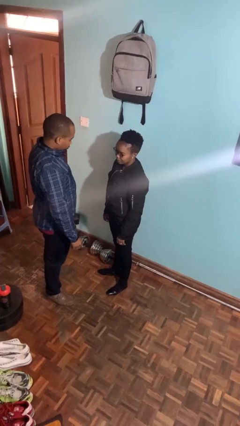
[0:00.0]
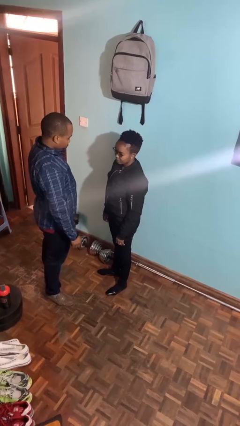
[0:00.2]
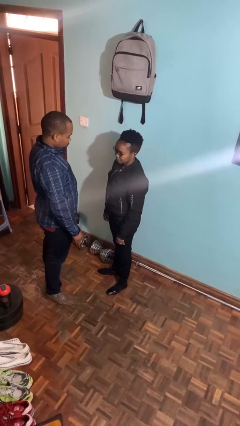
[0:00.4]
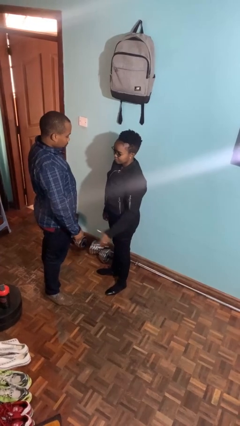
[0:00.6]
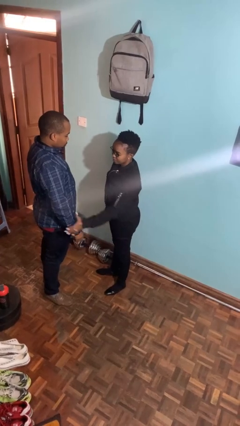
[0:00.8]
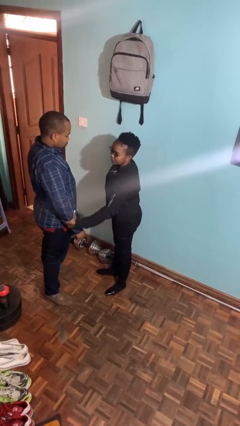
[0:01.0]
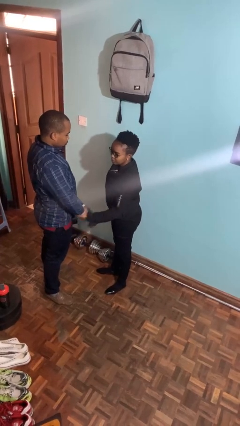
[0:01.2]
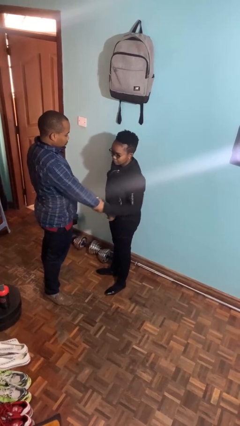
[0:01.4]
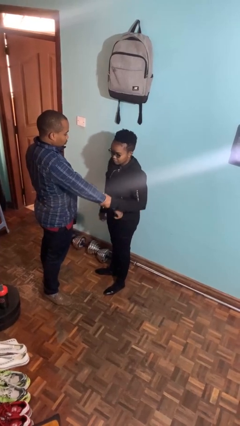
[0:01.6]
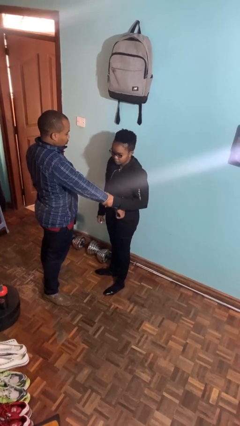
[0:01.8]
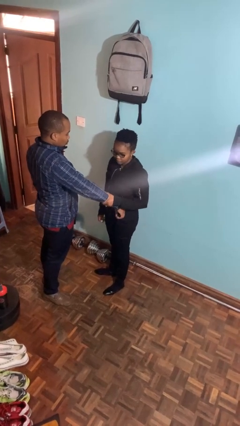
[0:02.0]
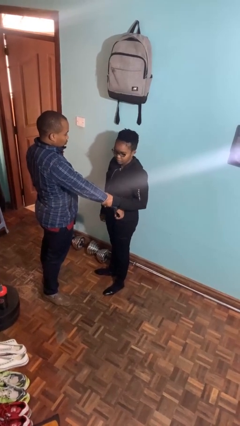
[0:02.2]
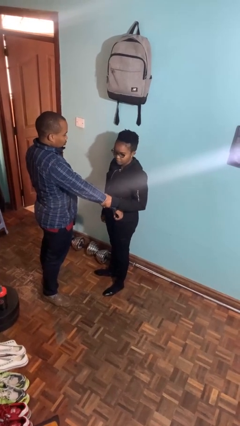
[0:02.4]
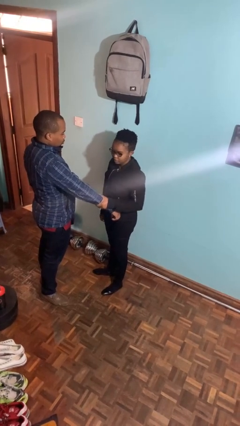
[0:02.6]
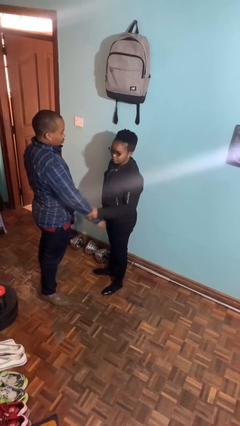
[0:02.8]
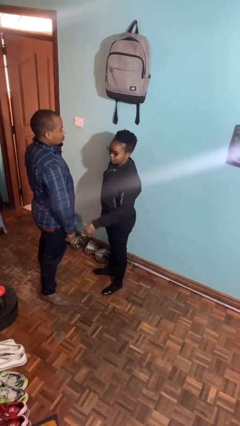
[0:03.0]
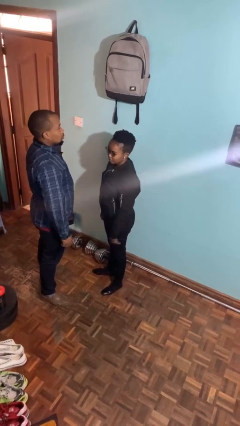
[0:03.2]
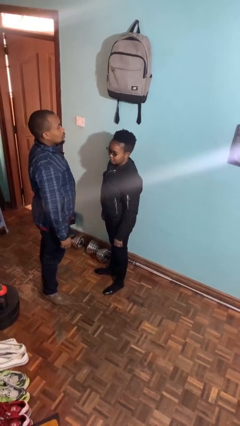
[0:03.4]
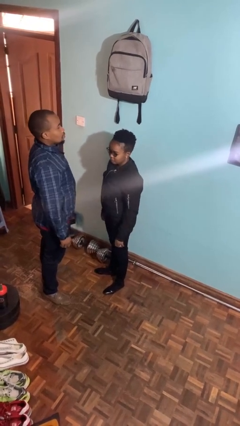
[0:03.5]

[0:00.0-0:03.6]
person grabs person by forearm

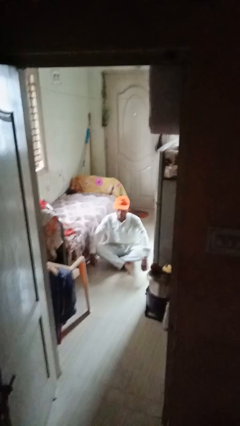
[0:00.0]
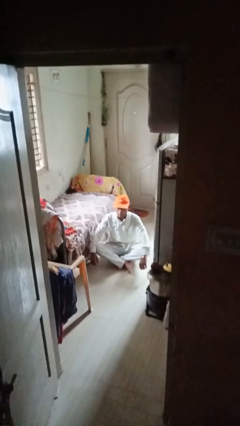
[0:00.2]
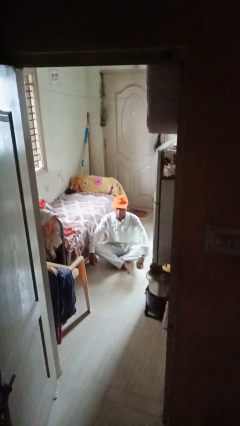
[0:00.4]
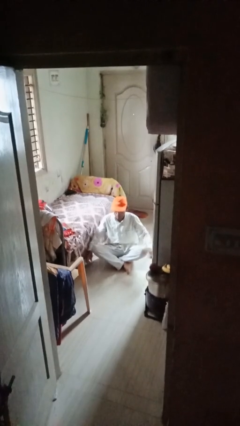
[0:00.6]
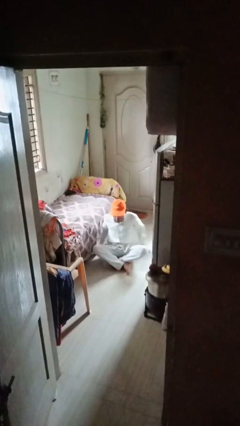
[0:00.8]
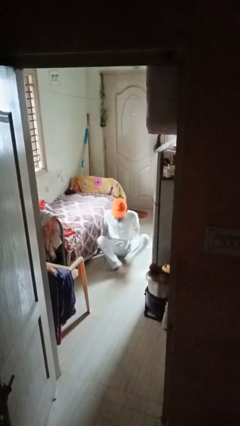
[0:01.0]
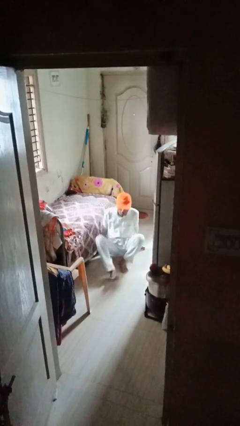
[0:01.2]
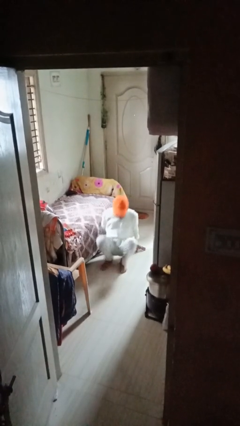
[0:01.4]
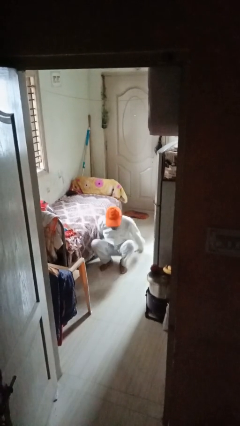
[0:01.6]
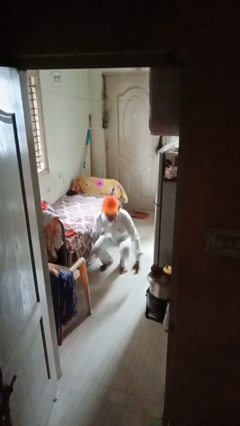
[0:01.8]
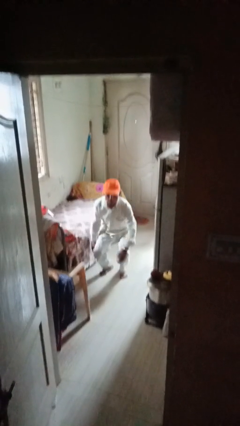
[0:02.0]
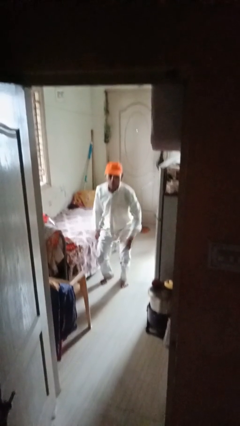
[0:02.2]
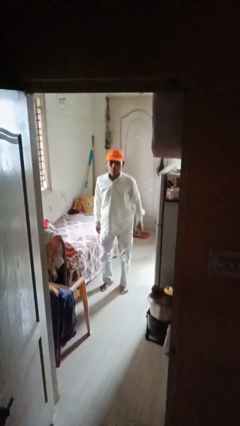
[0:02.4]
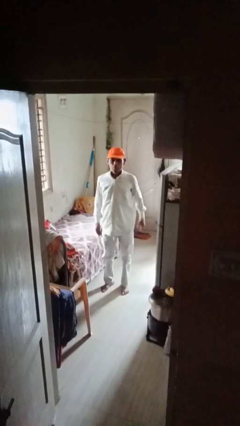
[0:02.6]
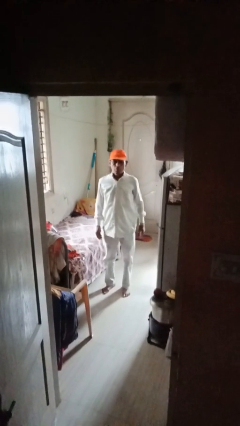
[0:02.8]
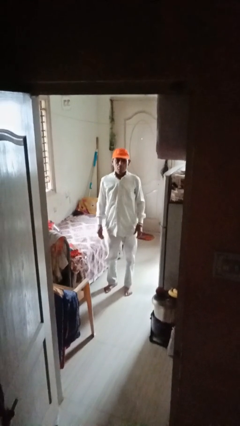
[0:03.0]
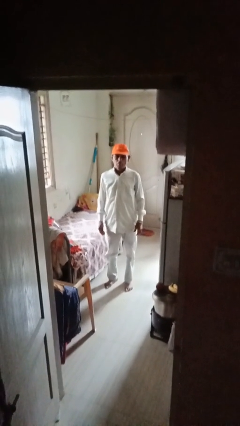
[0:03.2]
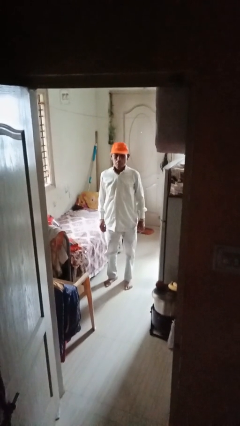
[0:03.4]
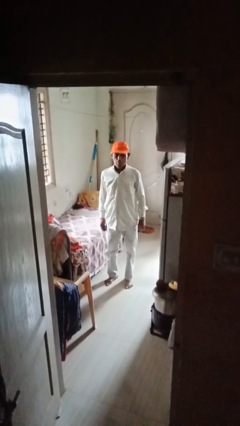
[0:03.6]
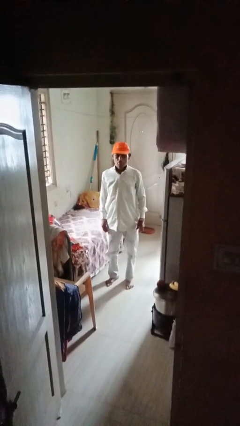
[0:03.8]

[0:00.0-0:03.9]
person stands up from floor

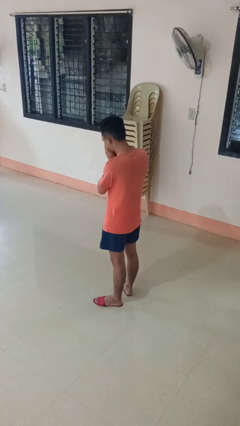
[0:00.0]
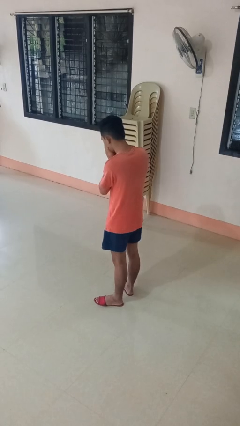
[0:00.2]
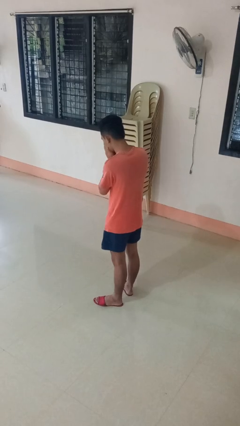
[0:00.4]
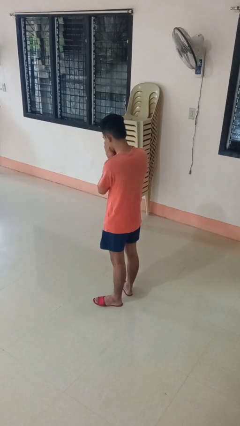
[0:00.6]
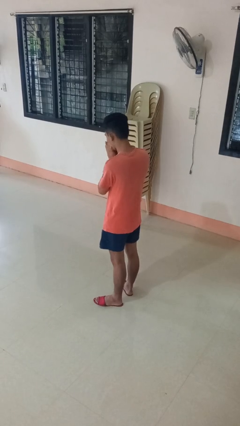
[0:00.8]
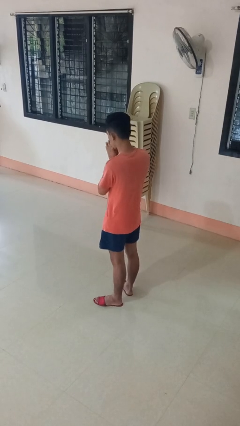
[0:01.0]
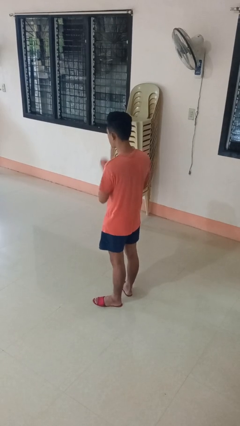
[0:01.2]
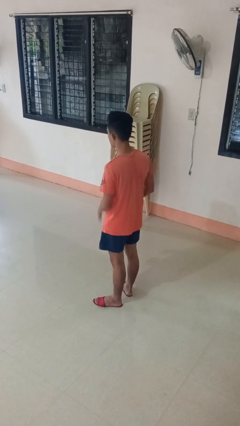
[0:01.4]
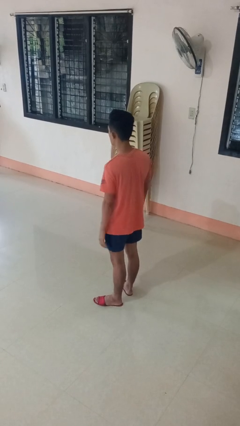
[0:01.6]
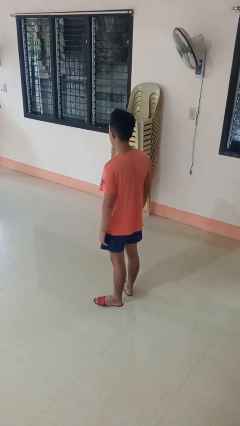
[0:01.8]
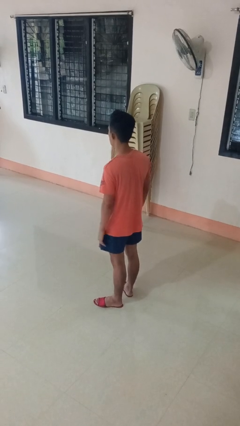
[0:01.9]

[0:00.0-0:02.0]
person shrugs

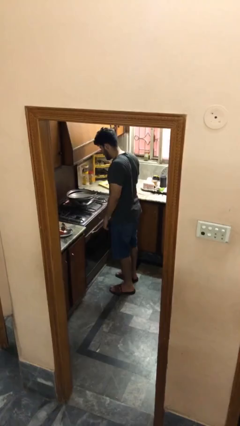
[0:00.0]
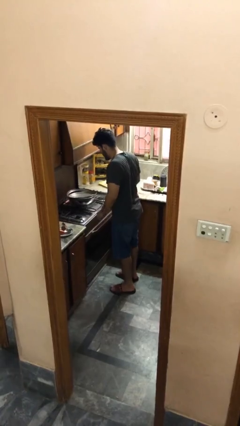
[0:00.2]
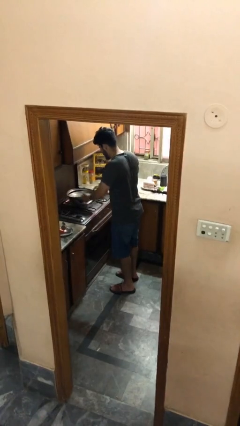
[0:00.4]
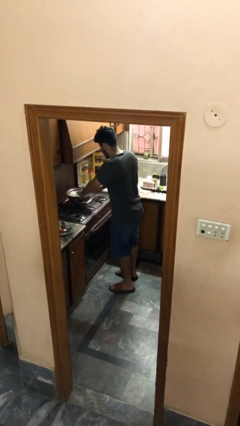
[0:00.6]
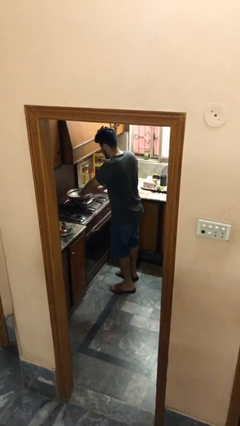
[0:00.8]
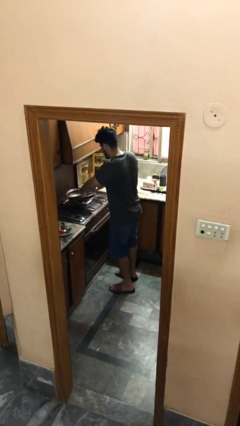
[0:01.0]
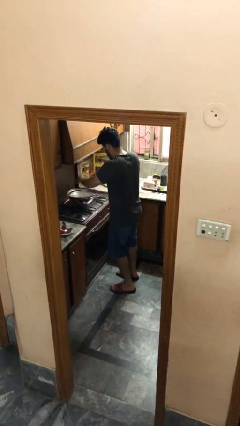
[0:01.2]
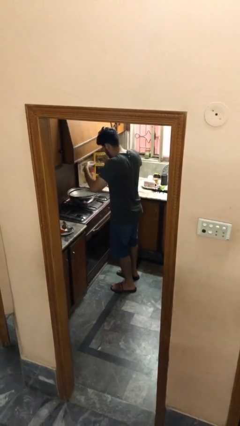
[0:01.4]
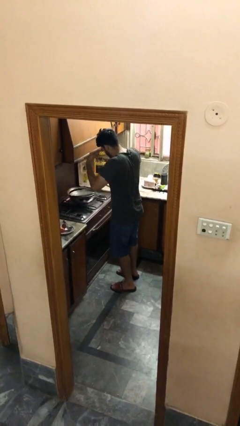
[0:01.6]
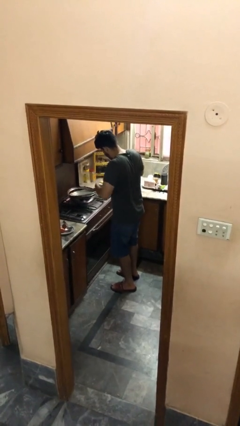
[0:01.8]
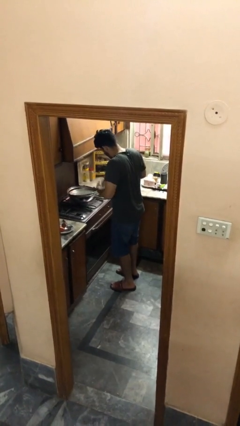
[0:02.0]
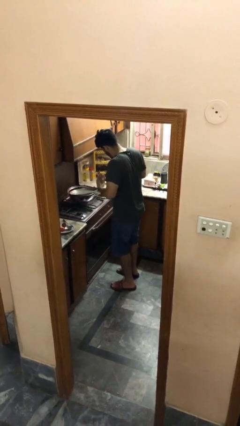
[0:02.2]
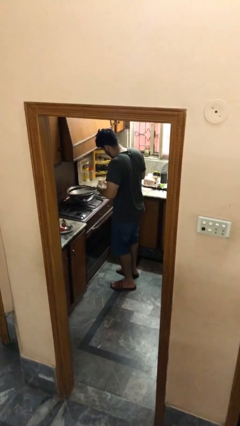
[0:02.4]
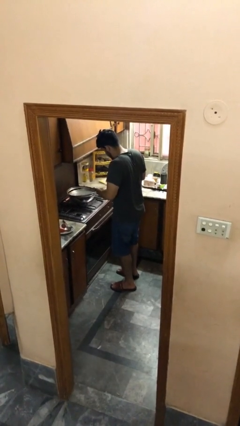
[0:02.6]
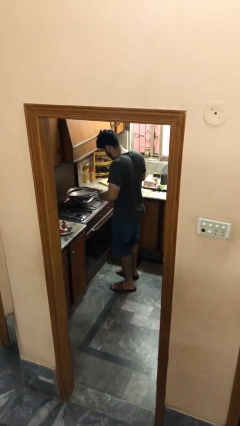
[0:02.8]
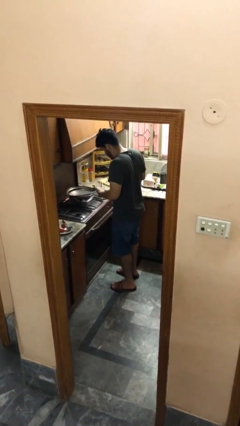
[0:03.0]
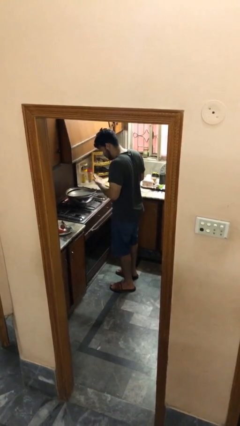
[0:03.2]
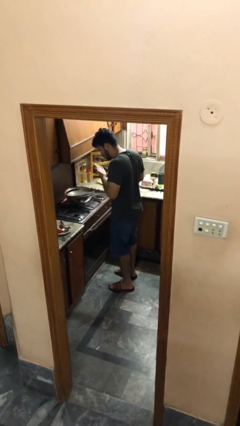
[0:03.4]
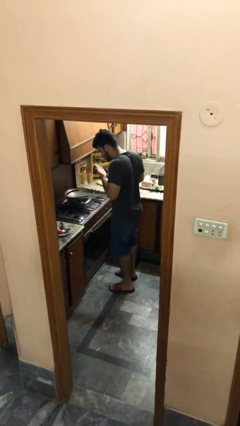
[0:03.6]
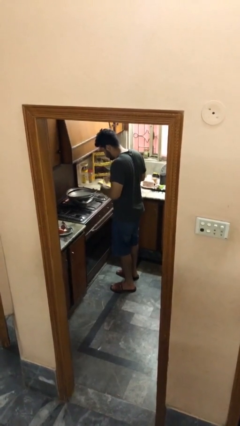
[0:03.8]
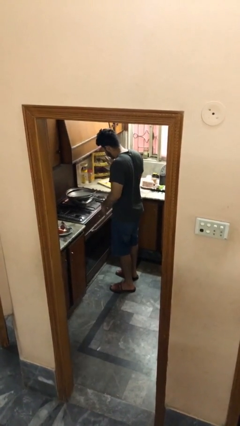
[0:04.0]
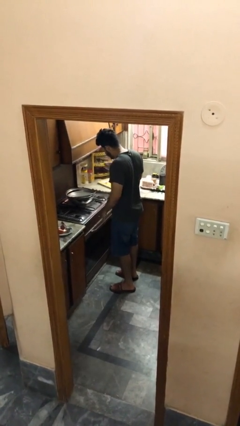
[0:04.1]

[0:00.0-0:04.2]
person burns hand

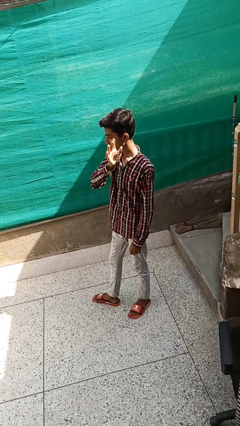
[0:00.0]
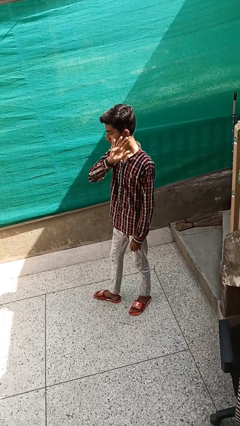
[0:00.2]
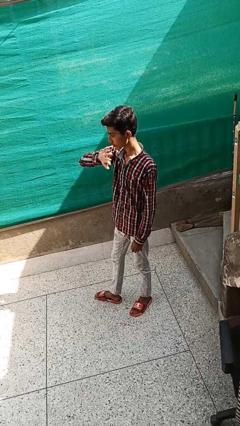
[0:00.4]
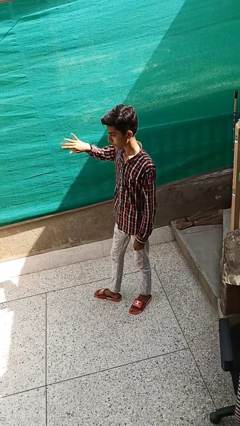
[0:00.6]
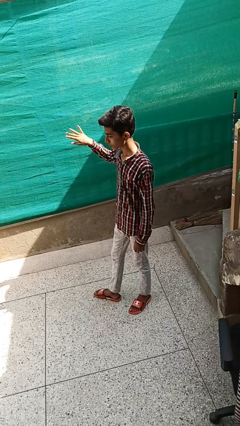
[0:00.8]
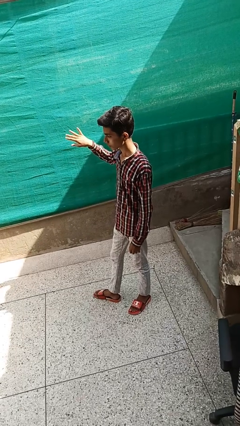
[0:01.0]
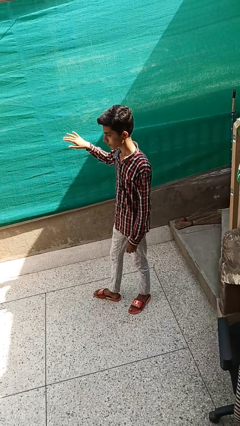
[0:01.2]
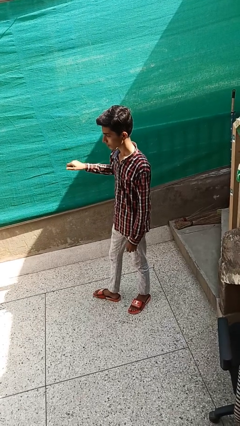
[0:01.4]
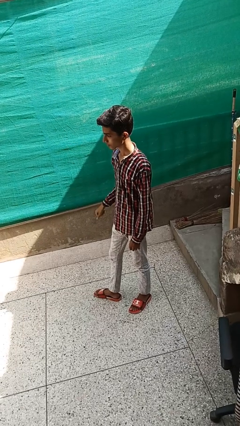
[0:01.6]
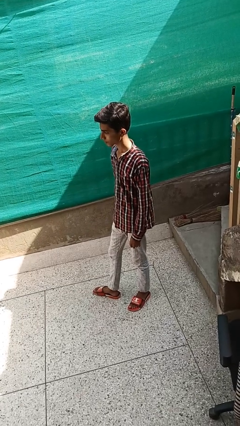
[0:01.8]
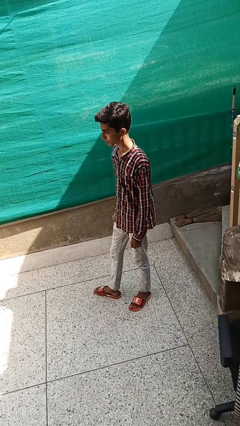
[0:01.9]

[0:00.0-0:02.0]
person gestures swipe right

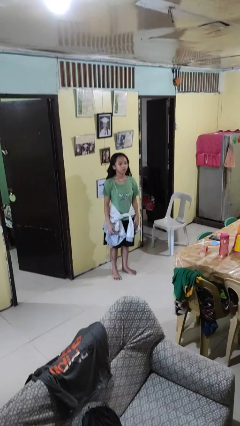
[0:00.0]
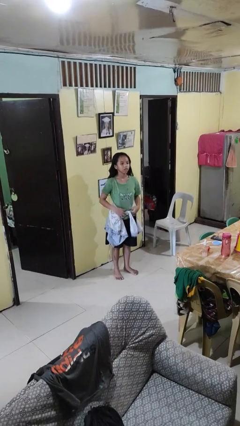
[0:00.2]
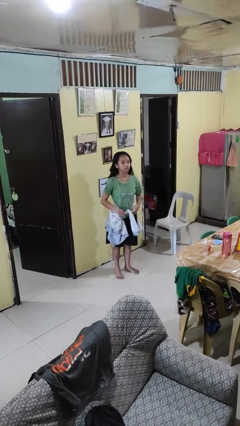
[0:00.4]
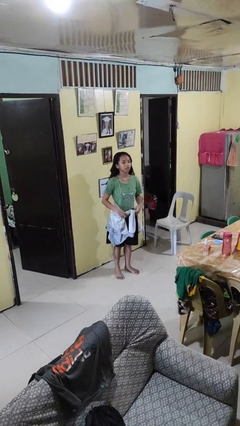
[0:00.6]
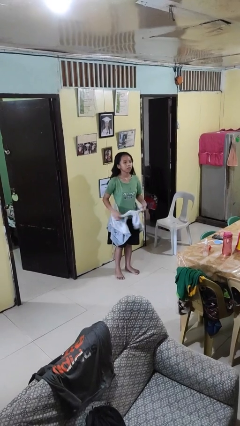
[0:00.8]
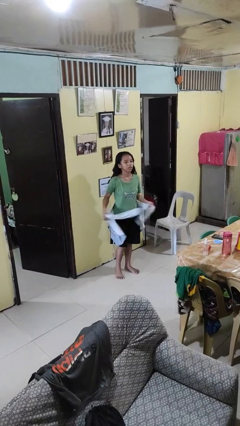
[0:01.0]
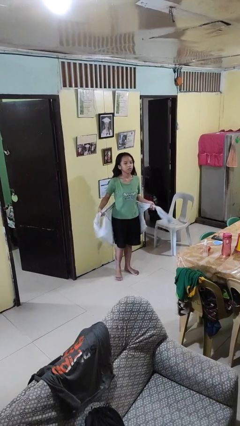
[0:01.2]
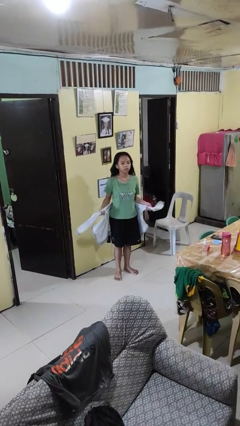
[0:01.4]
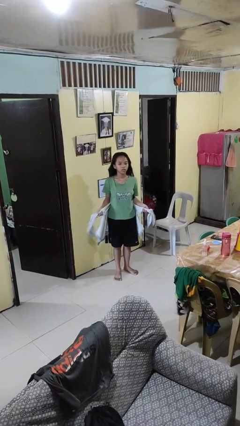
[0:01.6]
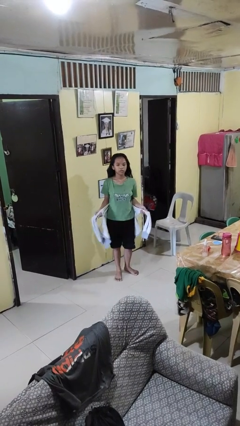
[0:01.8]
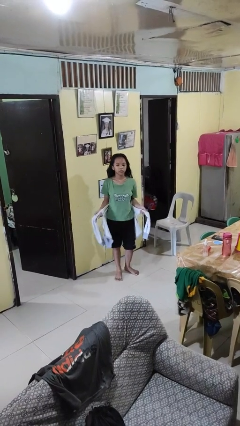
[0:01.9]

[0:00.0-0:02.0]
person unties jacket around waist
